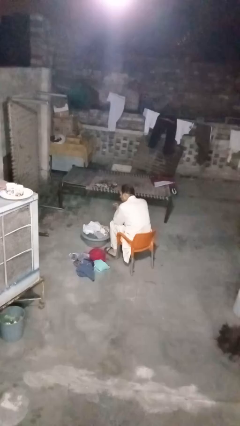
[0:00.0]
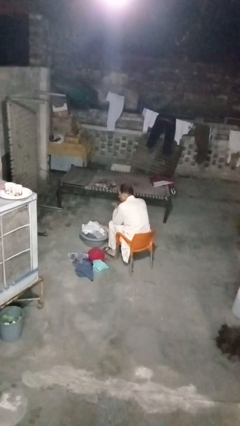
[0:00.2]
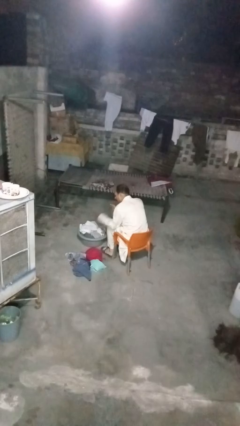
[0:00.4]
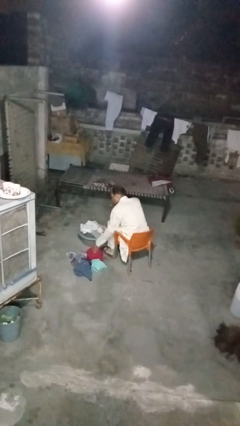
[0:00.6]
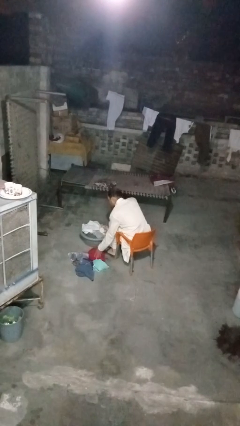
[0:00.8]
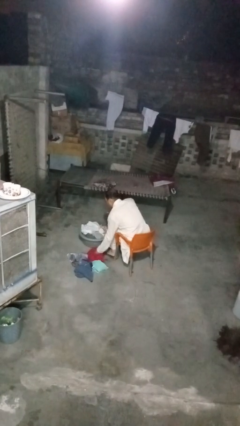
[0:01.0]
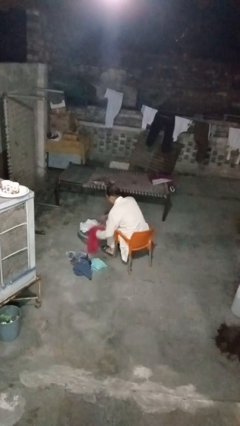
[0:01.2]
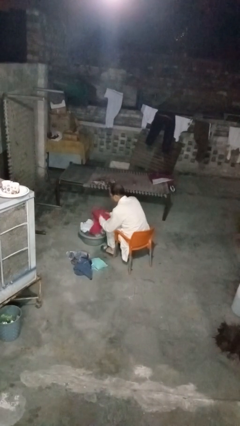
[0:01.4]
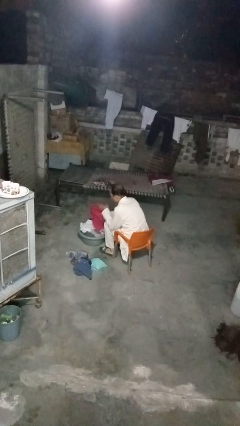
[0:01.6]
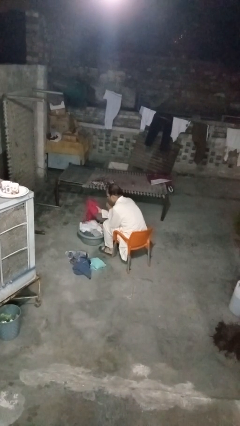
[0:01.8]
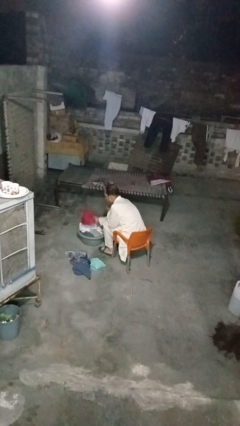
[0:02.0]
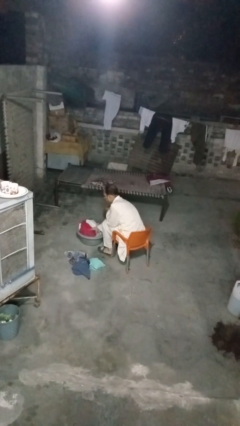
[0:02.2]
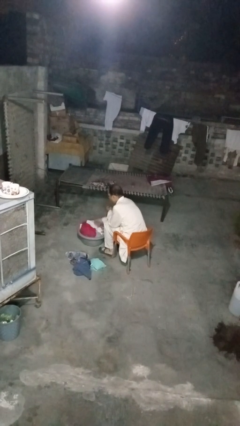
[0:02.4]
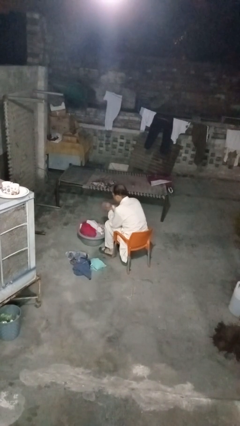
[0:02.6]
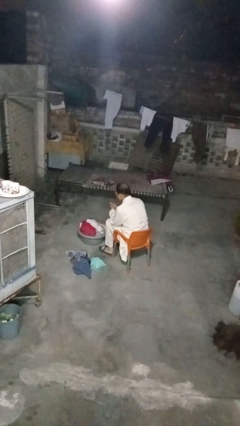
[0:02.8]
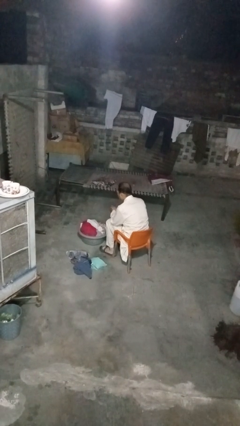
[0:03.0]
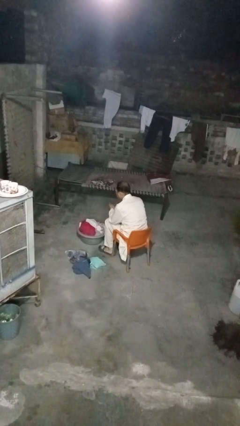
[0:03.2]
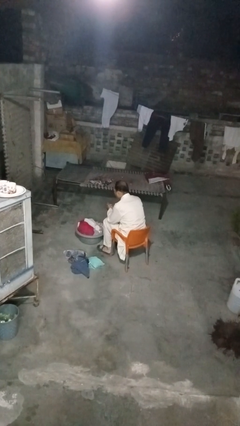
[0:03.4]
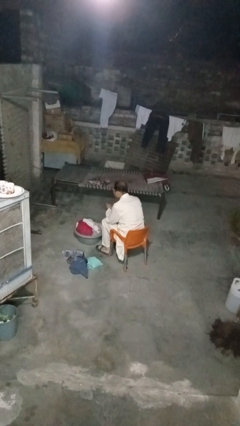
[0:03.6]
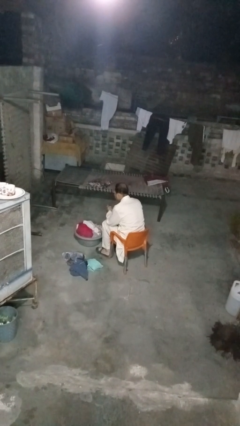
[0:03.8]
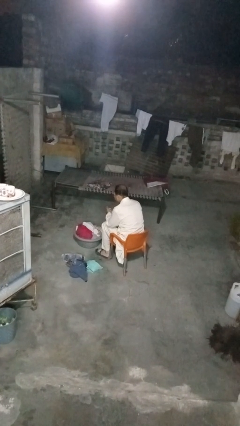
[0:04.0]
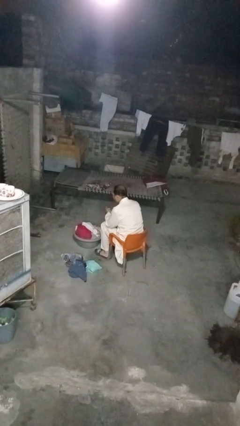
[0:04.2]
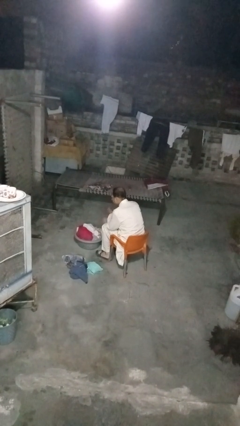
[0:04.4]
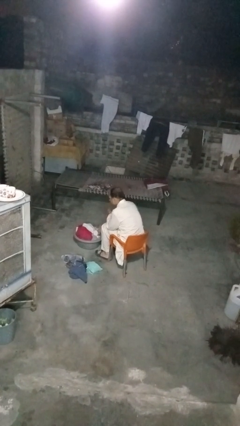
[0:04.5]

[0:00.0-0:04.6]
person puts object into basket

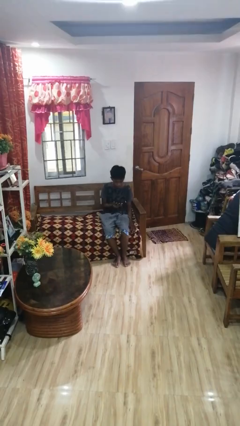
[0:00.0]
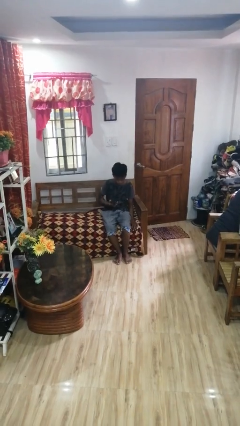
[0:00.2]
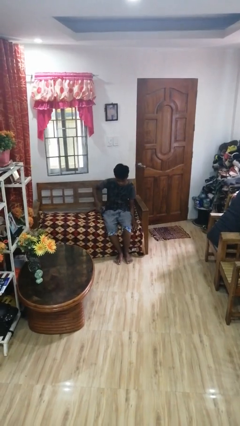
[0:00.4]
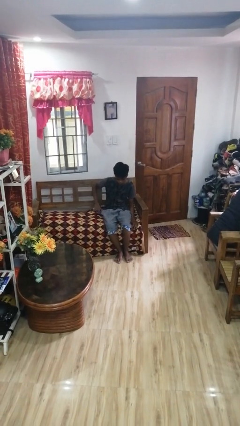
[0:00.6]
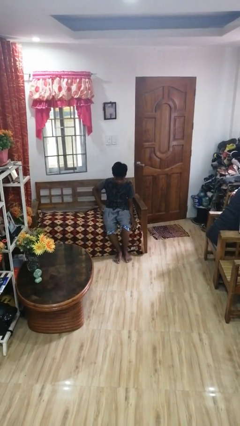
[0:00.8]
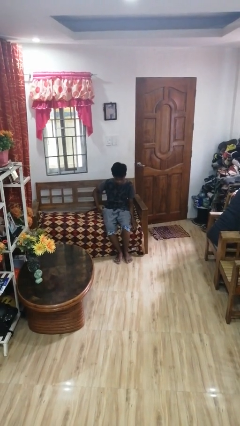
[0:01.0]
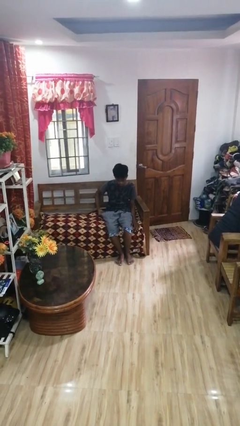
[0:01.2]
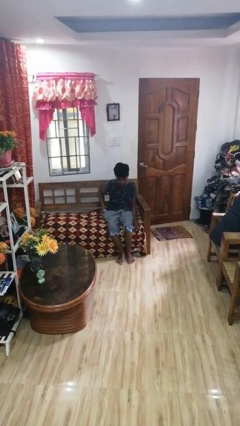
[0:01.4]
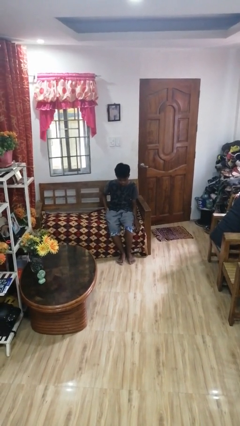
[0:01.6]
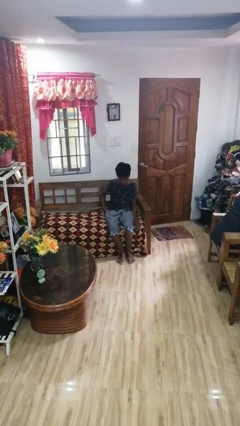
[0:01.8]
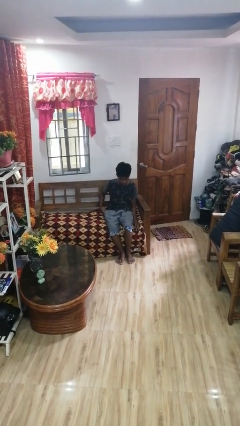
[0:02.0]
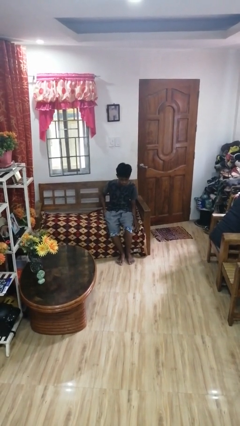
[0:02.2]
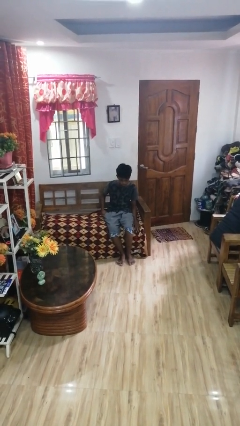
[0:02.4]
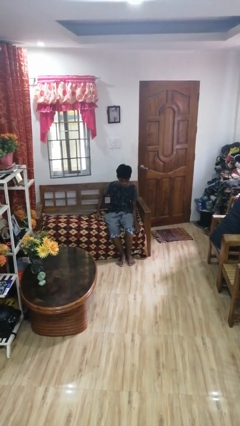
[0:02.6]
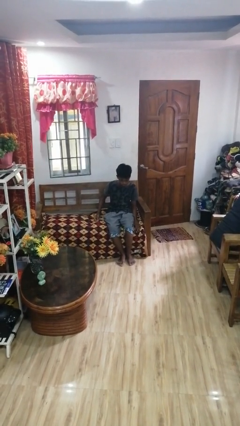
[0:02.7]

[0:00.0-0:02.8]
person puts phone into pocket

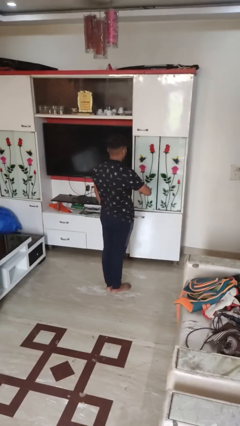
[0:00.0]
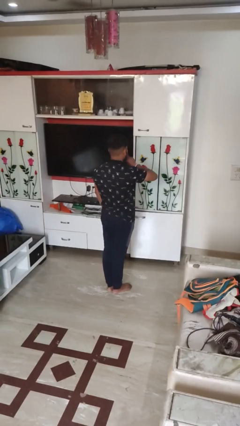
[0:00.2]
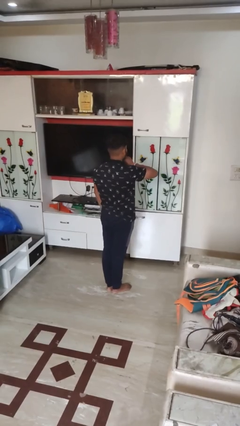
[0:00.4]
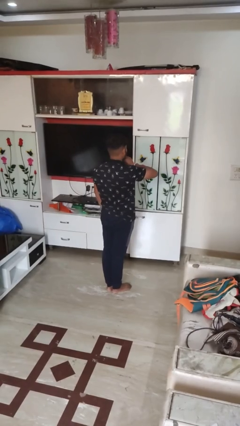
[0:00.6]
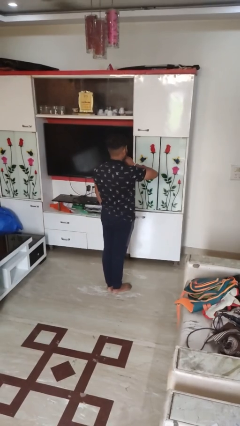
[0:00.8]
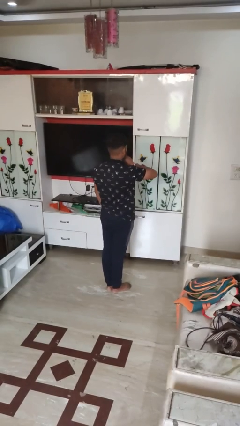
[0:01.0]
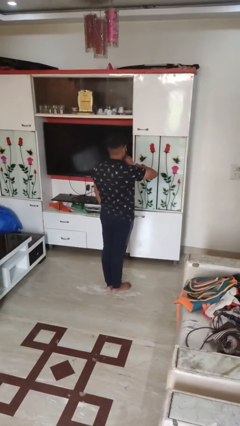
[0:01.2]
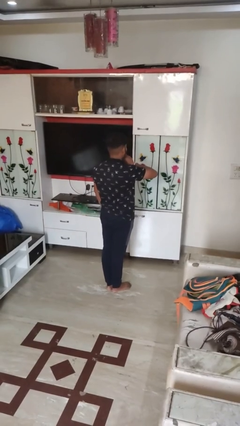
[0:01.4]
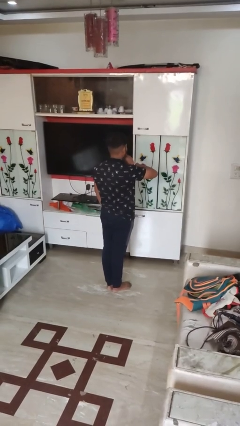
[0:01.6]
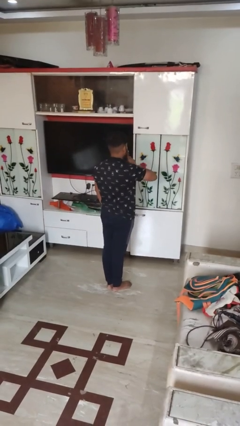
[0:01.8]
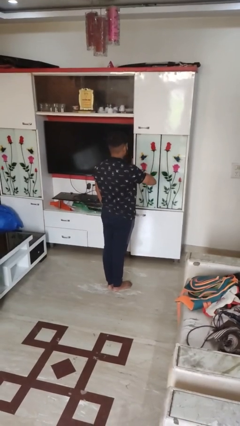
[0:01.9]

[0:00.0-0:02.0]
person gestures be quiet

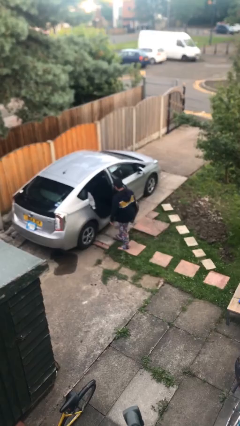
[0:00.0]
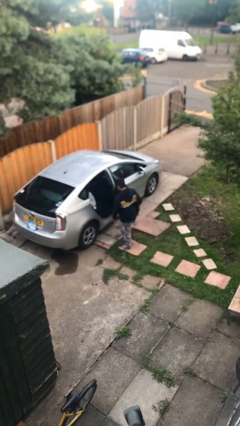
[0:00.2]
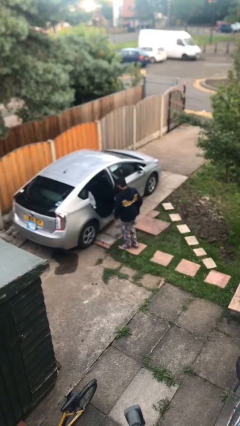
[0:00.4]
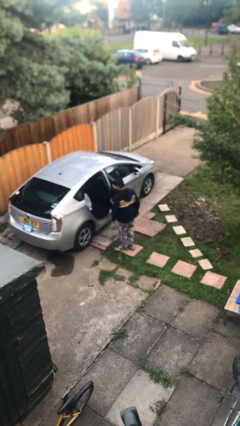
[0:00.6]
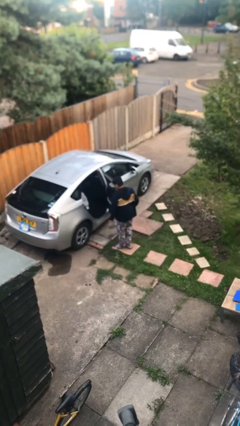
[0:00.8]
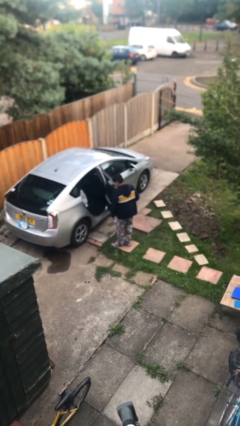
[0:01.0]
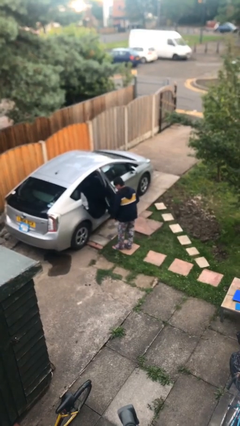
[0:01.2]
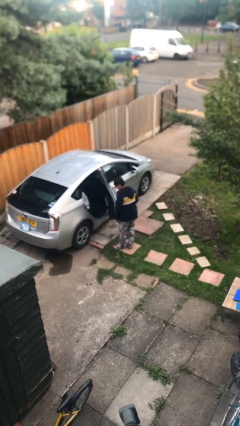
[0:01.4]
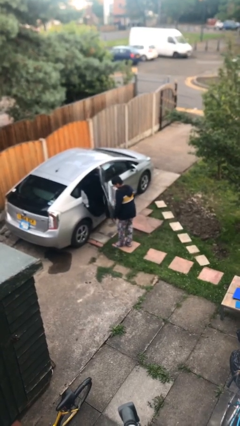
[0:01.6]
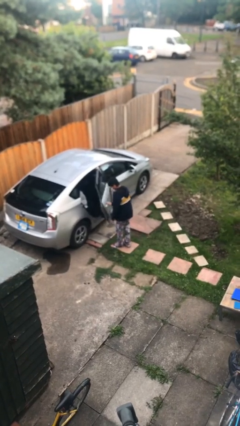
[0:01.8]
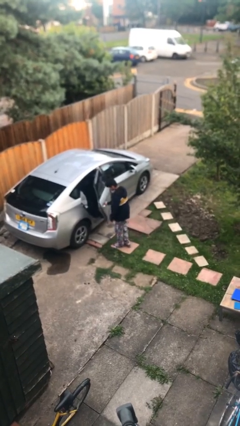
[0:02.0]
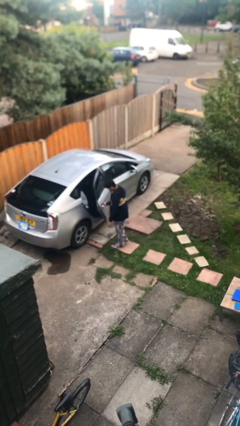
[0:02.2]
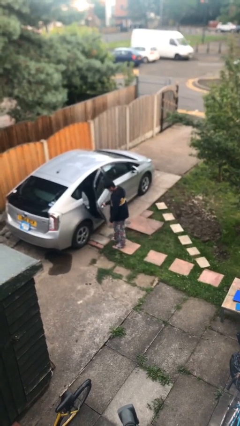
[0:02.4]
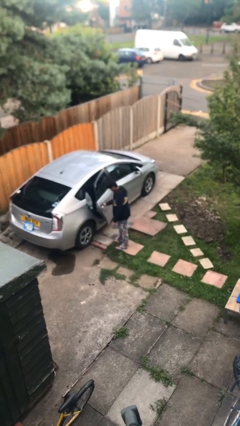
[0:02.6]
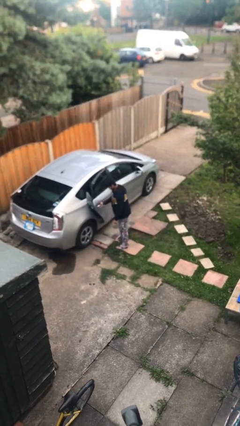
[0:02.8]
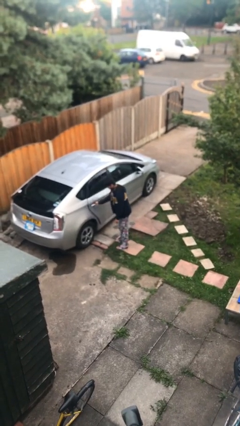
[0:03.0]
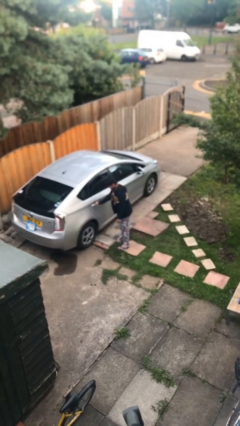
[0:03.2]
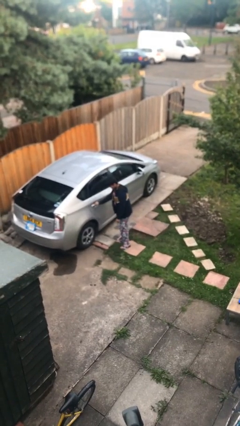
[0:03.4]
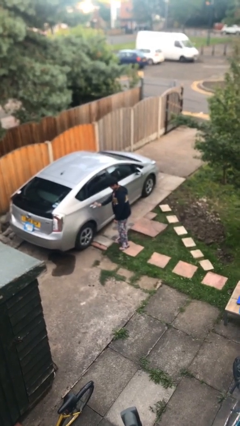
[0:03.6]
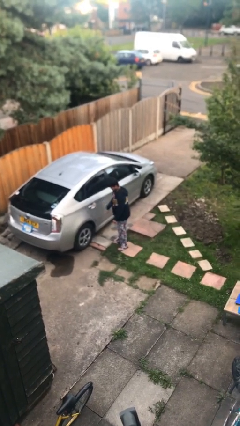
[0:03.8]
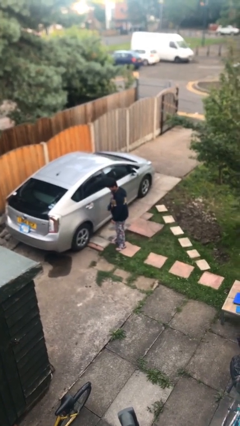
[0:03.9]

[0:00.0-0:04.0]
person closes car door

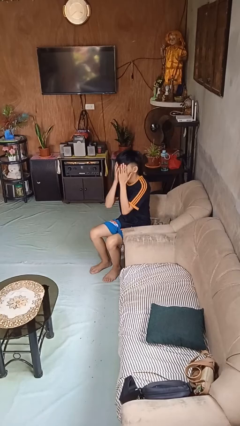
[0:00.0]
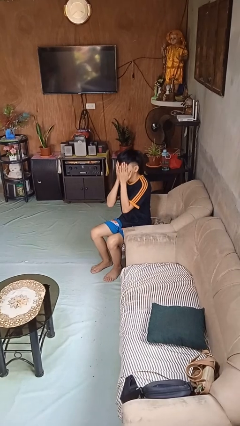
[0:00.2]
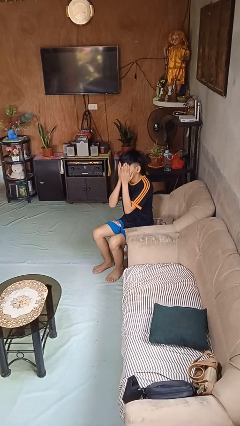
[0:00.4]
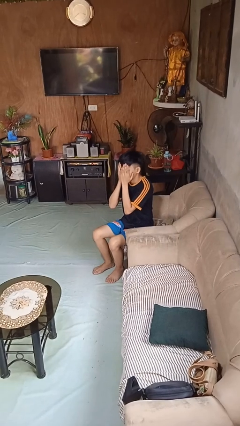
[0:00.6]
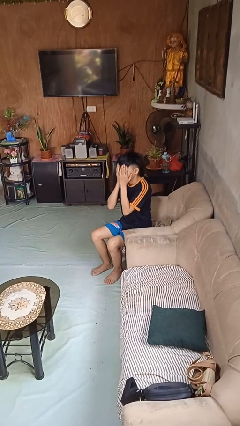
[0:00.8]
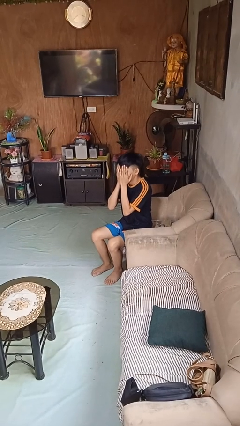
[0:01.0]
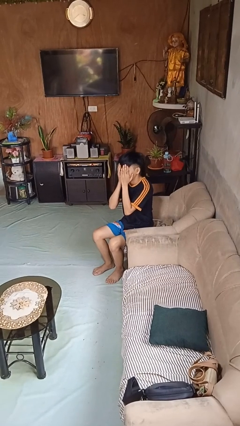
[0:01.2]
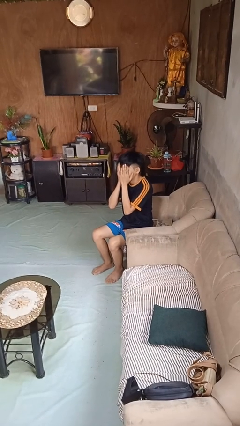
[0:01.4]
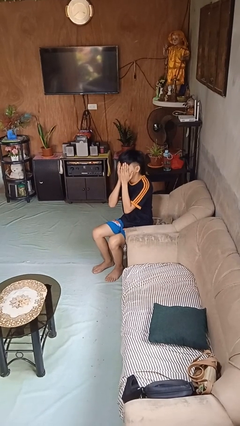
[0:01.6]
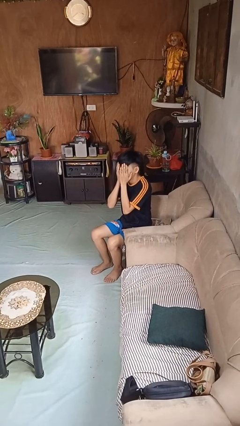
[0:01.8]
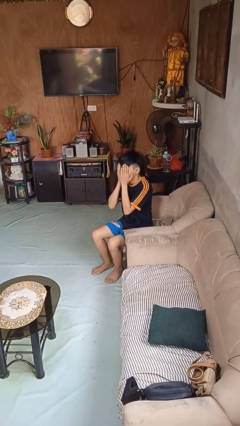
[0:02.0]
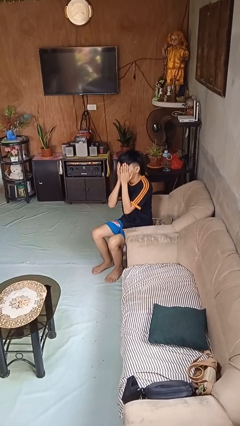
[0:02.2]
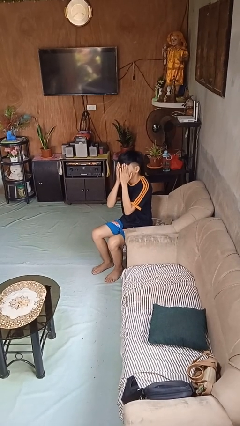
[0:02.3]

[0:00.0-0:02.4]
person covers face with hands

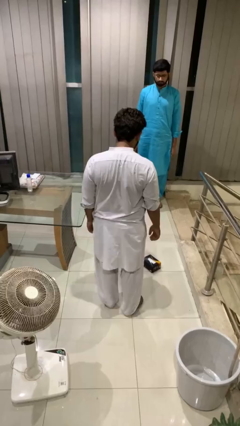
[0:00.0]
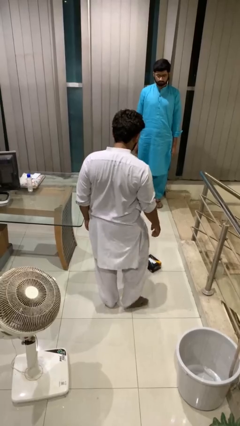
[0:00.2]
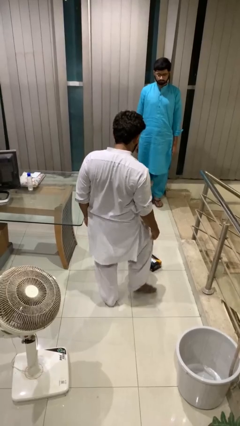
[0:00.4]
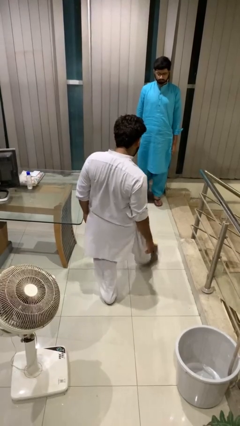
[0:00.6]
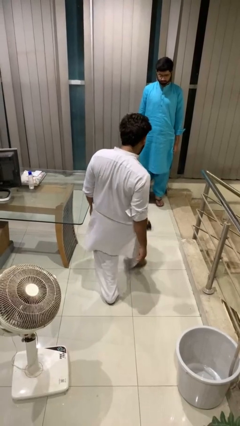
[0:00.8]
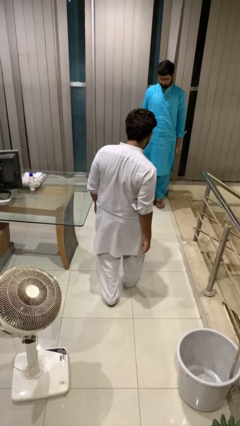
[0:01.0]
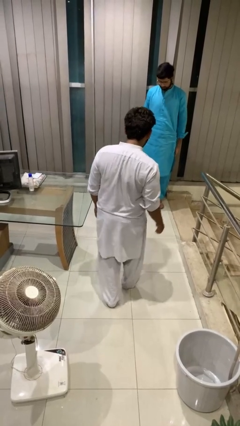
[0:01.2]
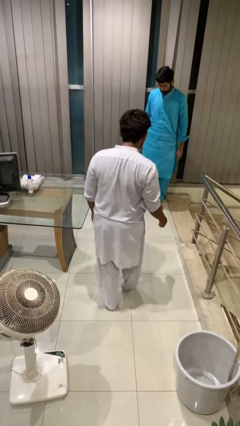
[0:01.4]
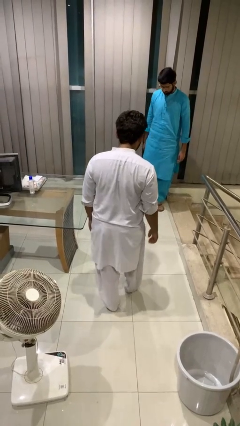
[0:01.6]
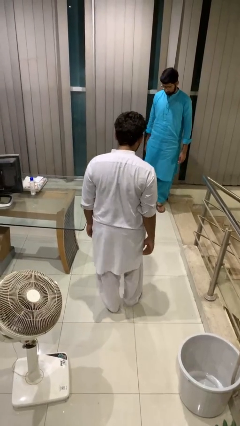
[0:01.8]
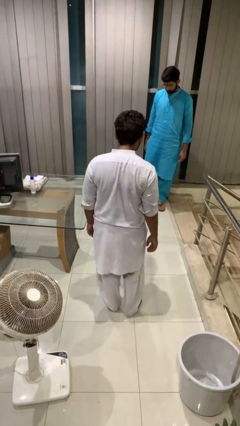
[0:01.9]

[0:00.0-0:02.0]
person kicks object to person
